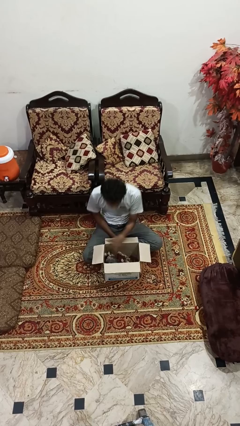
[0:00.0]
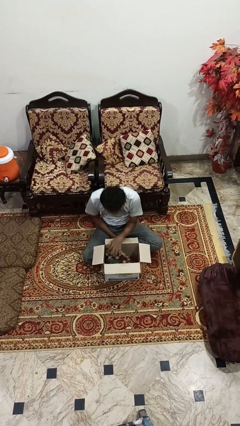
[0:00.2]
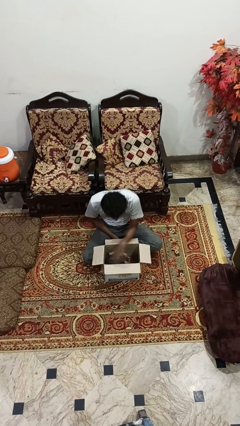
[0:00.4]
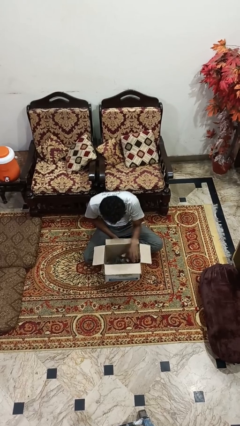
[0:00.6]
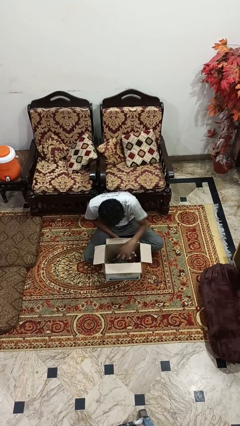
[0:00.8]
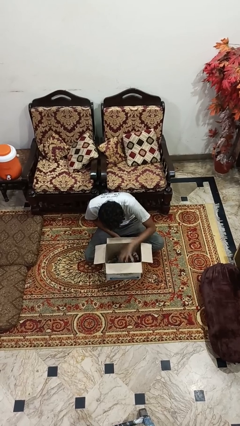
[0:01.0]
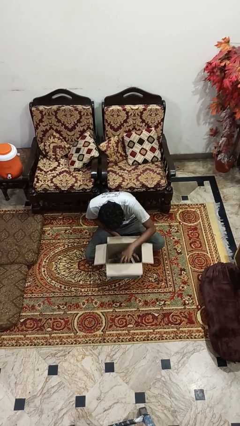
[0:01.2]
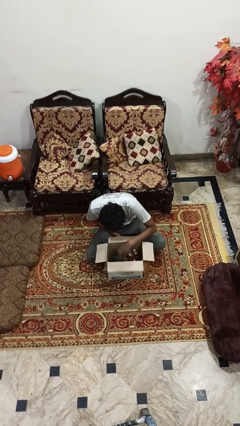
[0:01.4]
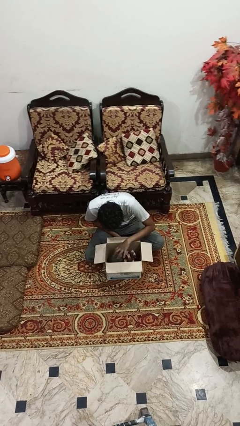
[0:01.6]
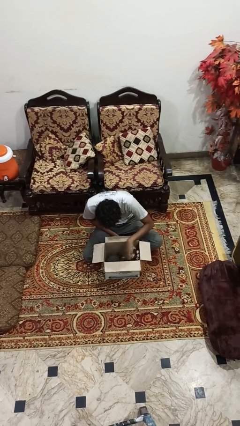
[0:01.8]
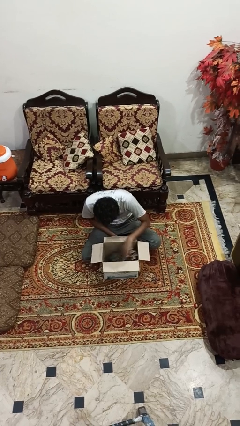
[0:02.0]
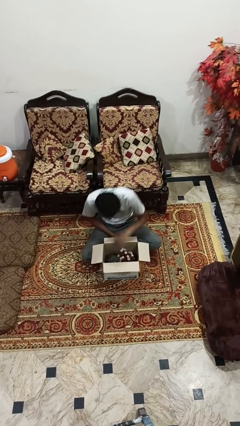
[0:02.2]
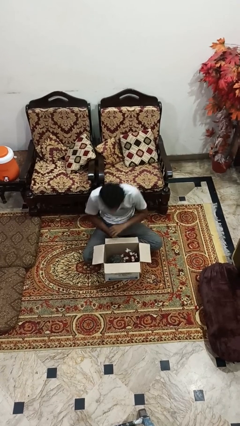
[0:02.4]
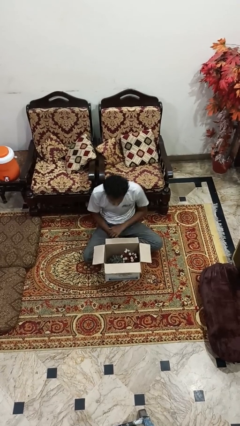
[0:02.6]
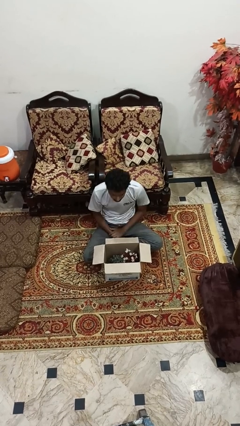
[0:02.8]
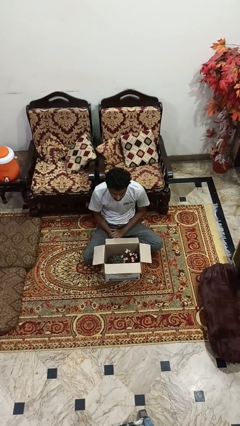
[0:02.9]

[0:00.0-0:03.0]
person searches in box

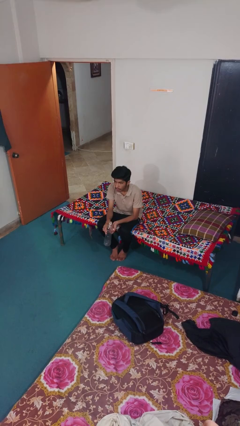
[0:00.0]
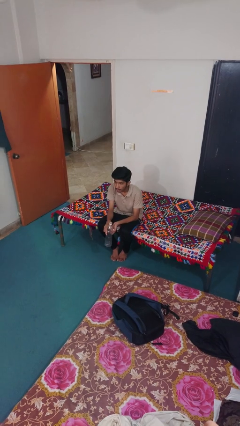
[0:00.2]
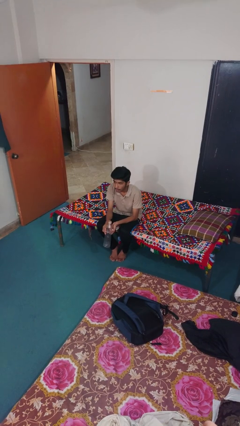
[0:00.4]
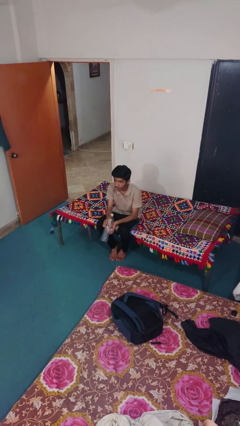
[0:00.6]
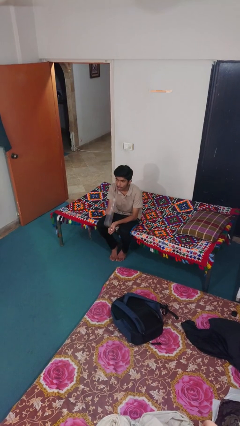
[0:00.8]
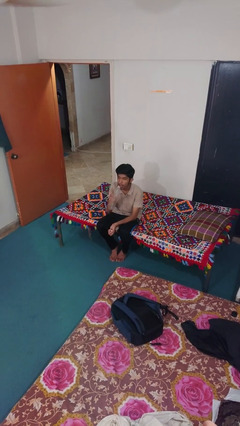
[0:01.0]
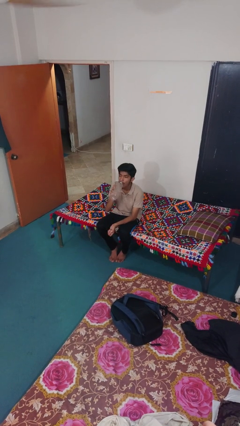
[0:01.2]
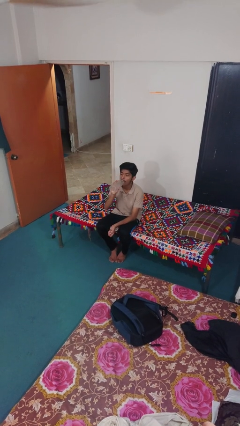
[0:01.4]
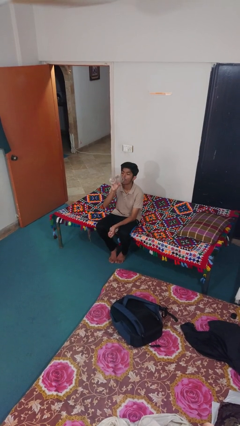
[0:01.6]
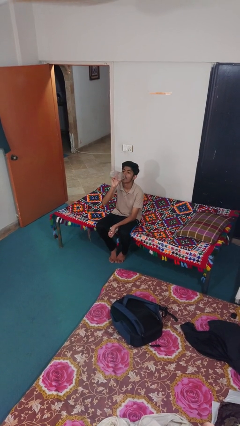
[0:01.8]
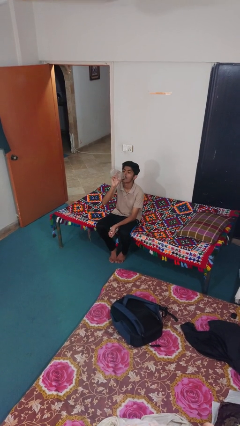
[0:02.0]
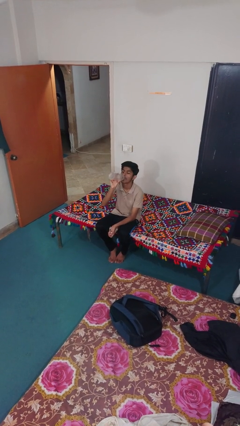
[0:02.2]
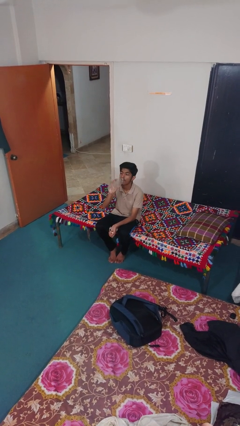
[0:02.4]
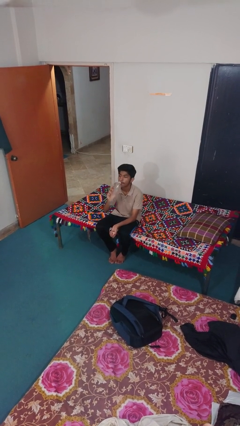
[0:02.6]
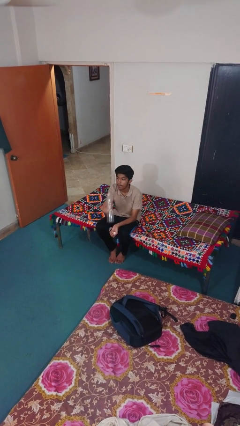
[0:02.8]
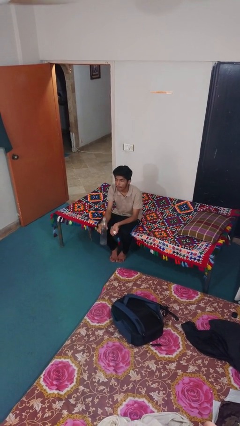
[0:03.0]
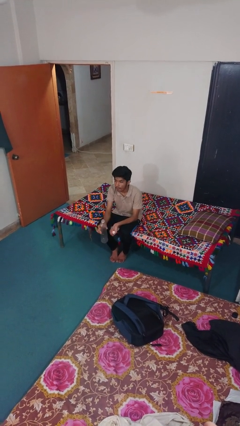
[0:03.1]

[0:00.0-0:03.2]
person drinks from bottle

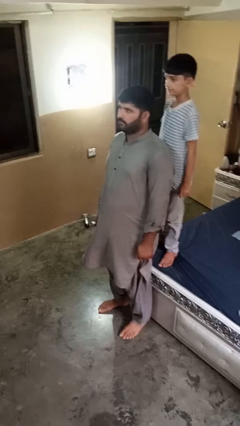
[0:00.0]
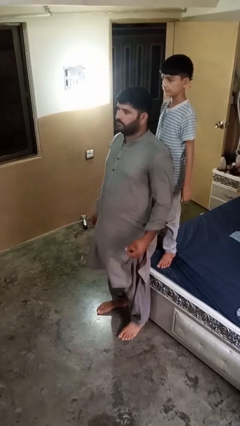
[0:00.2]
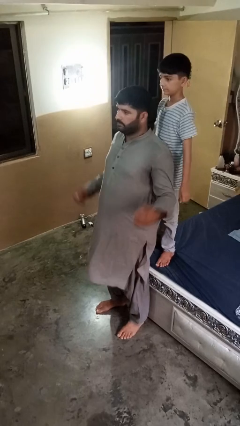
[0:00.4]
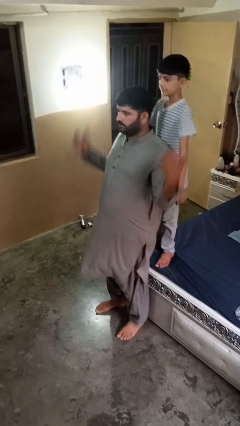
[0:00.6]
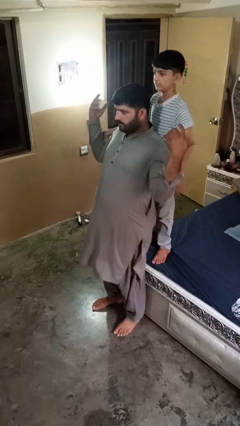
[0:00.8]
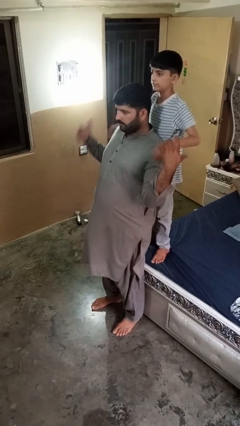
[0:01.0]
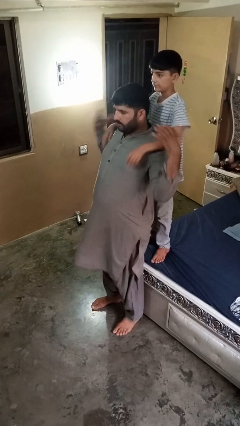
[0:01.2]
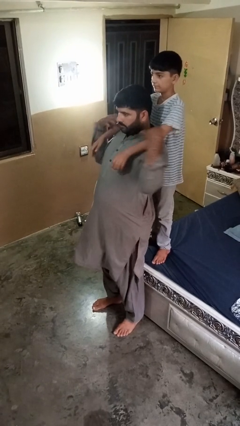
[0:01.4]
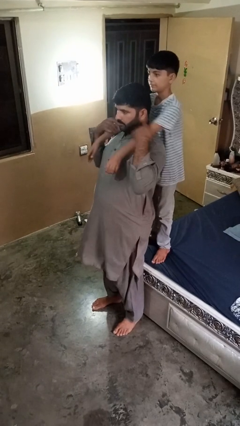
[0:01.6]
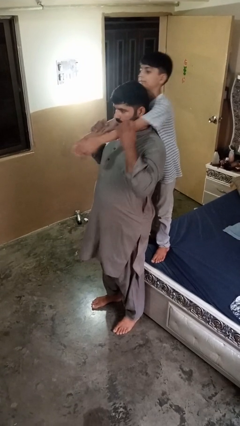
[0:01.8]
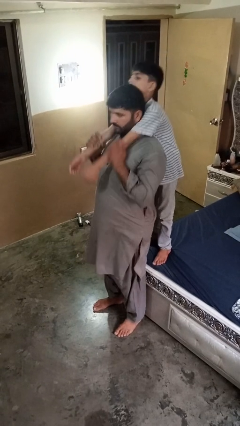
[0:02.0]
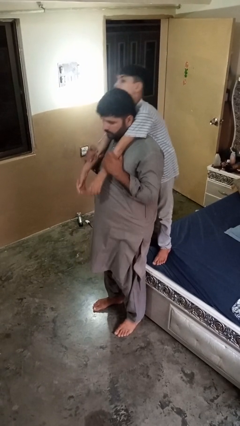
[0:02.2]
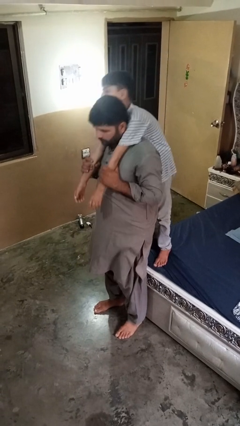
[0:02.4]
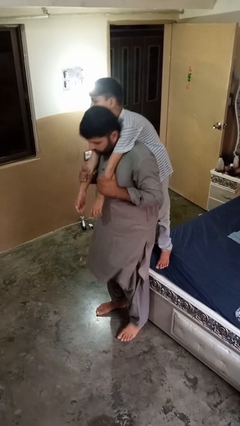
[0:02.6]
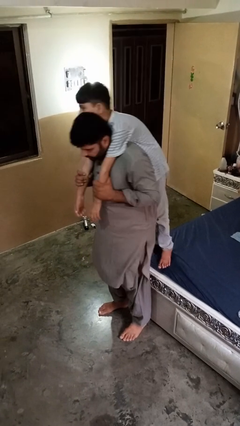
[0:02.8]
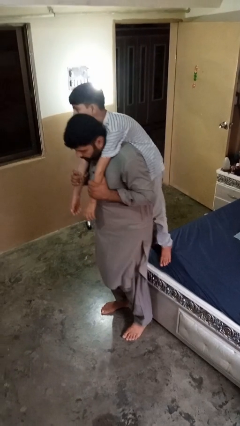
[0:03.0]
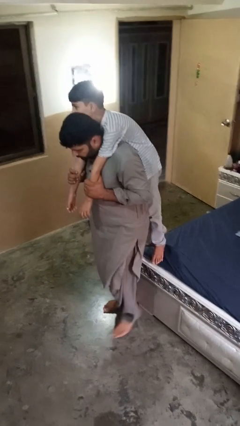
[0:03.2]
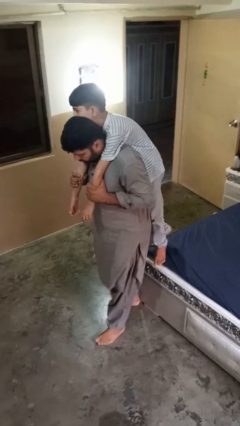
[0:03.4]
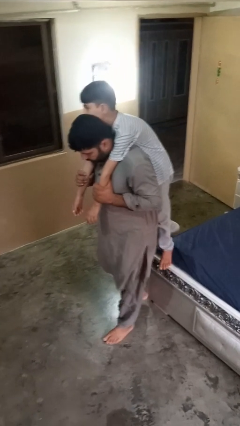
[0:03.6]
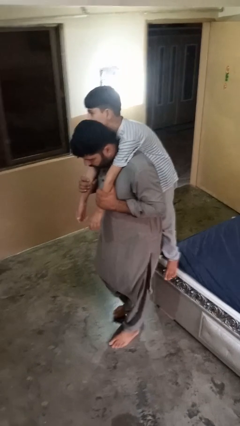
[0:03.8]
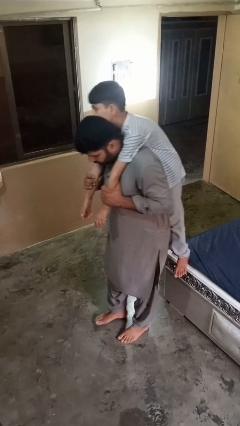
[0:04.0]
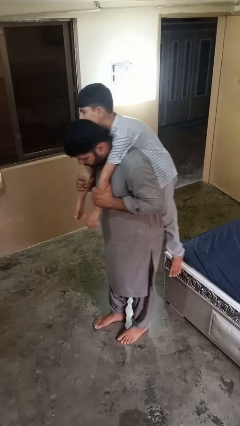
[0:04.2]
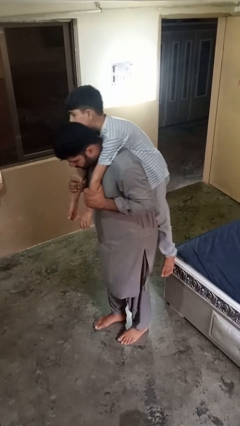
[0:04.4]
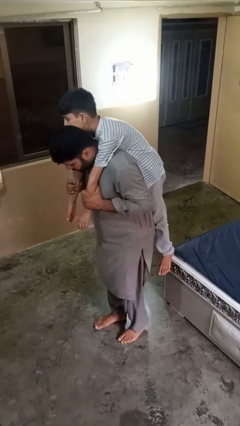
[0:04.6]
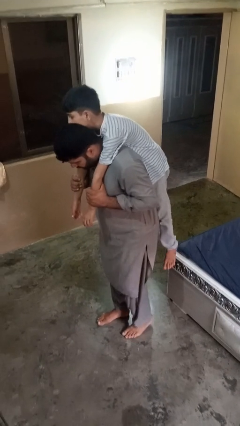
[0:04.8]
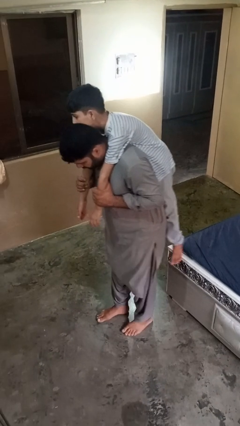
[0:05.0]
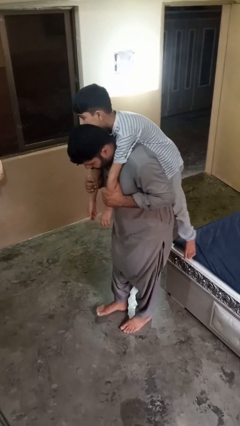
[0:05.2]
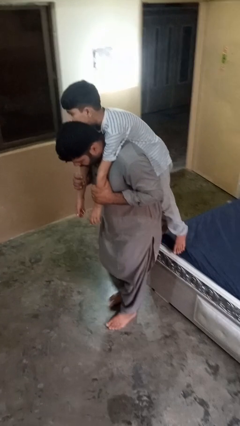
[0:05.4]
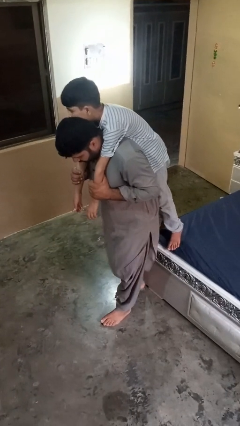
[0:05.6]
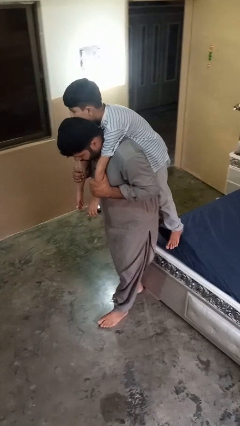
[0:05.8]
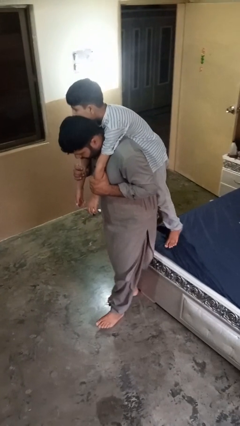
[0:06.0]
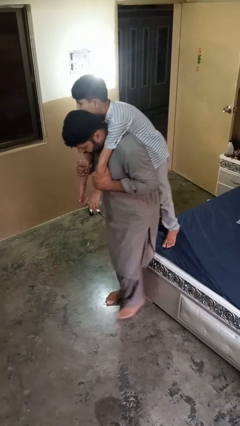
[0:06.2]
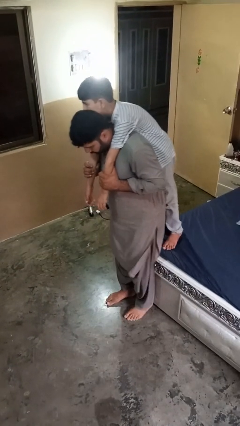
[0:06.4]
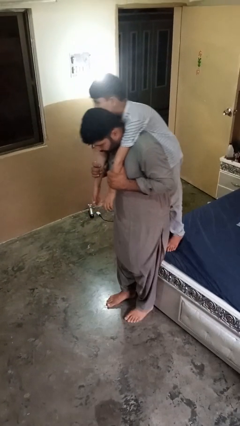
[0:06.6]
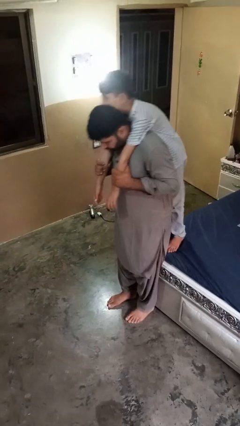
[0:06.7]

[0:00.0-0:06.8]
person carries person on back

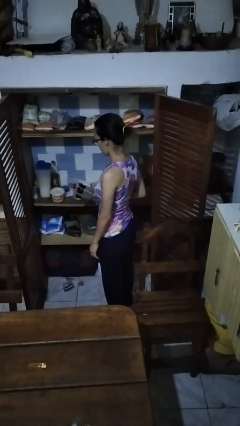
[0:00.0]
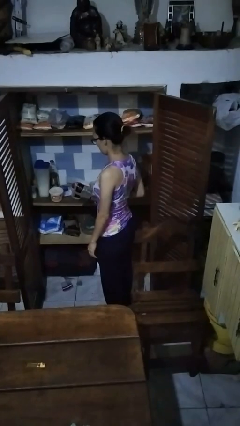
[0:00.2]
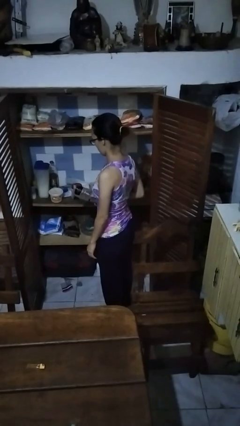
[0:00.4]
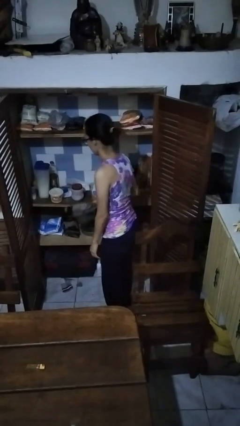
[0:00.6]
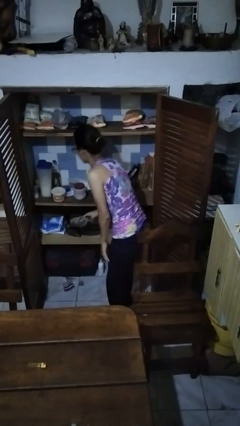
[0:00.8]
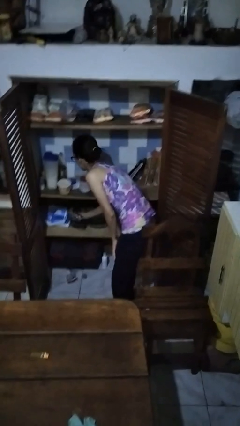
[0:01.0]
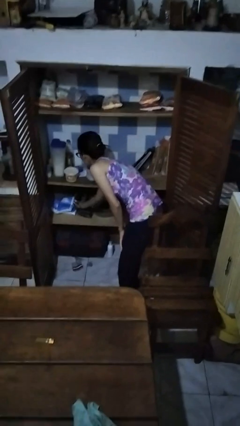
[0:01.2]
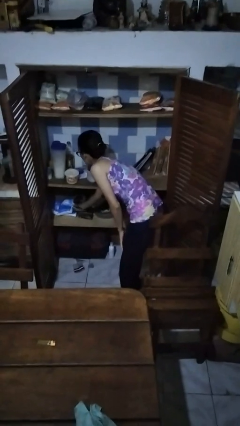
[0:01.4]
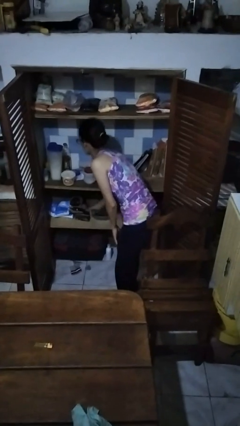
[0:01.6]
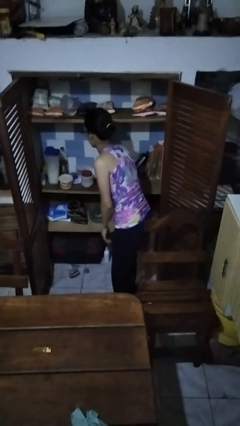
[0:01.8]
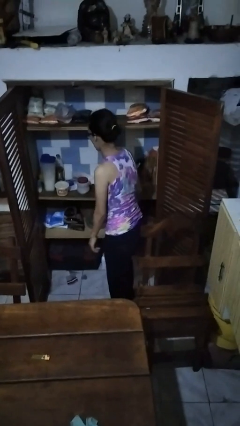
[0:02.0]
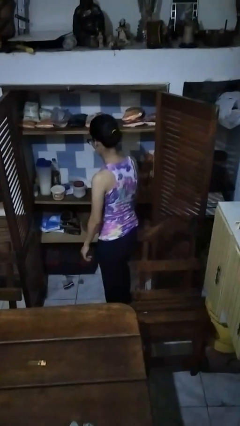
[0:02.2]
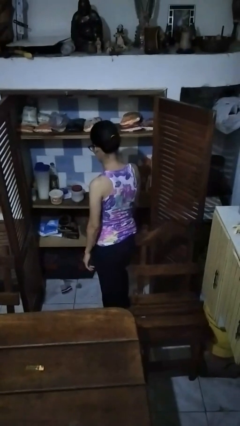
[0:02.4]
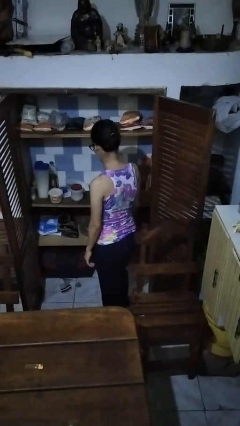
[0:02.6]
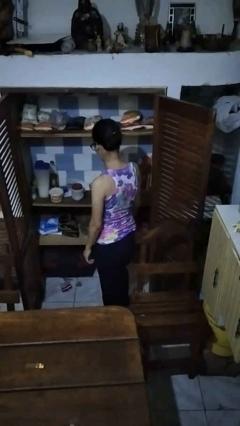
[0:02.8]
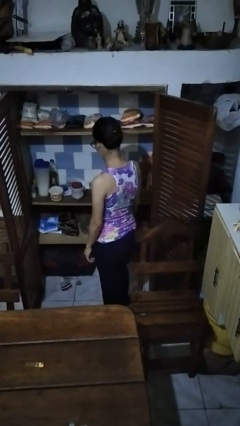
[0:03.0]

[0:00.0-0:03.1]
person puts object in cabinet

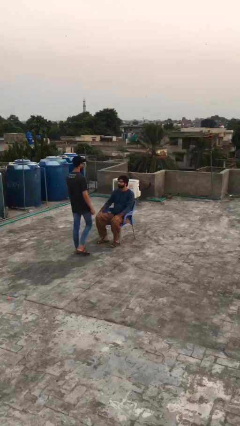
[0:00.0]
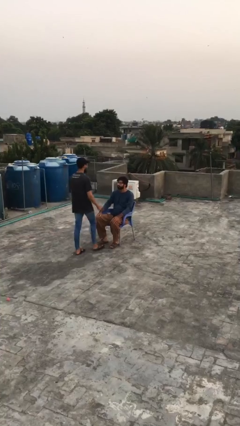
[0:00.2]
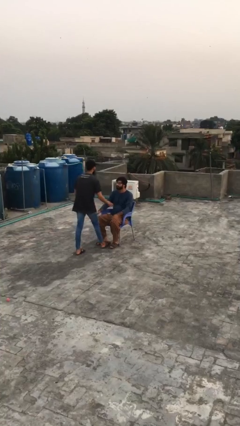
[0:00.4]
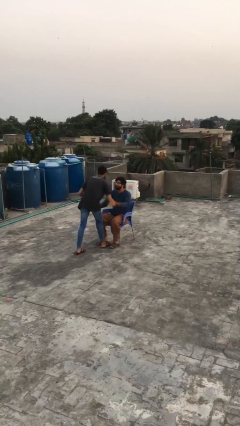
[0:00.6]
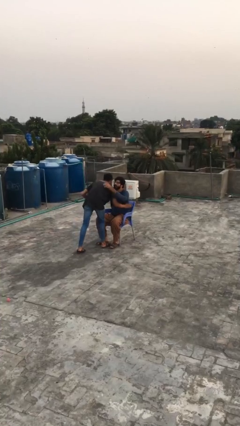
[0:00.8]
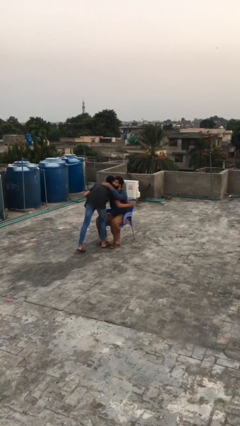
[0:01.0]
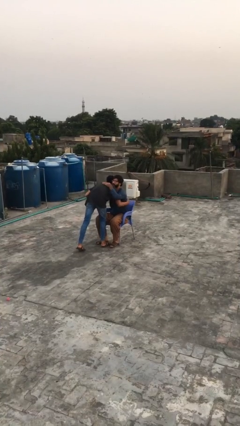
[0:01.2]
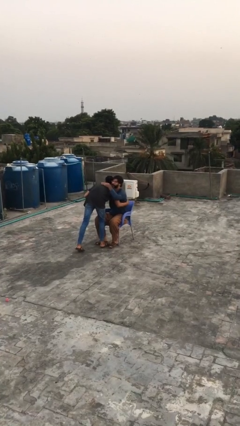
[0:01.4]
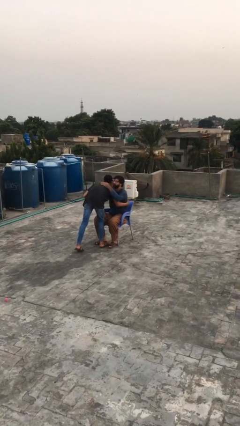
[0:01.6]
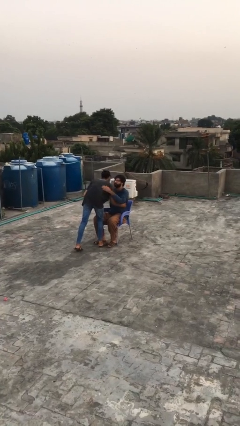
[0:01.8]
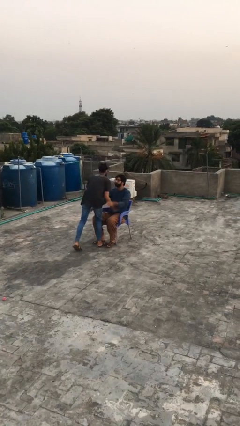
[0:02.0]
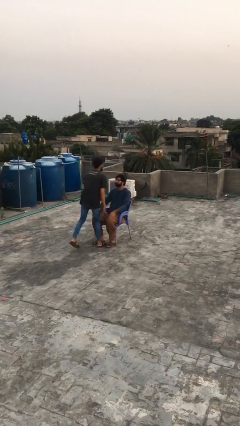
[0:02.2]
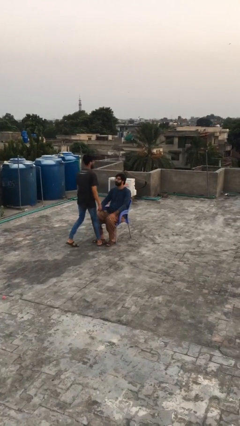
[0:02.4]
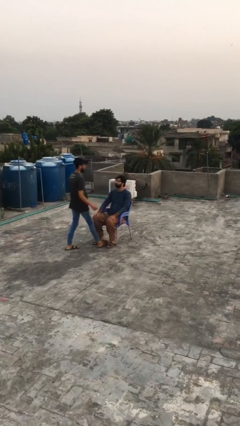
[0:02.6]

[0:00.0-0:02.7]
person embraces person
